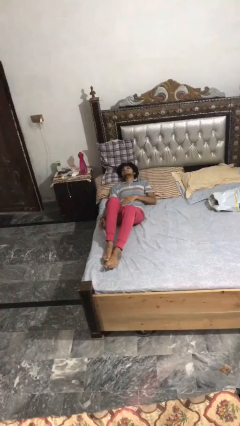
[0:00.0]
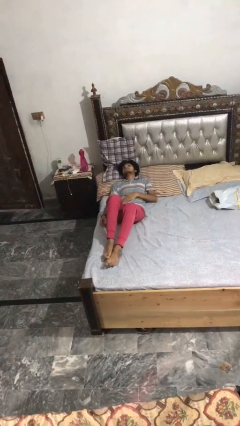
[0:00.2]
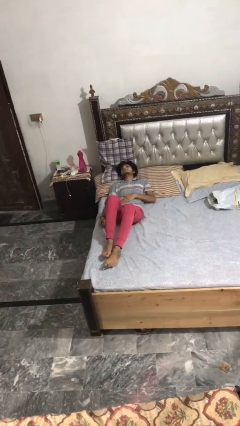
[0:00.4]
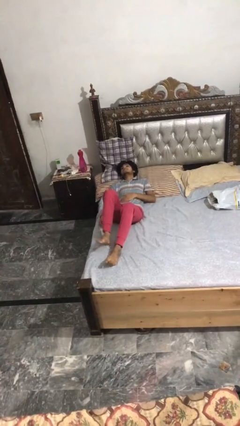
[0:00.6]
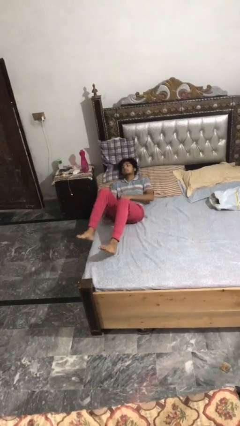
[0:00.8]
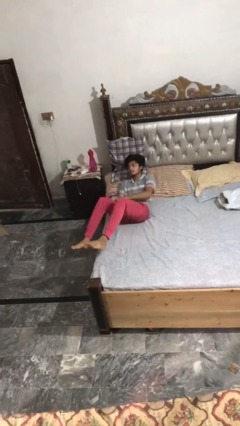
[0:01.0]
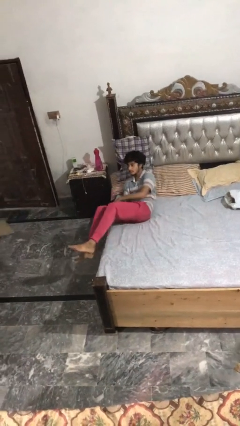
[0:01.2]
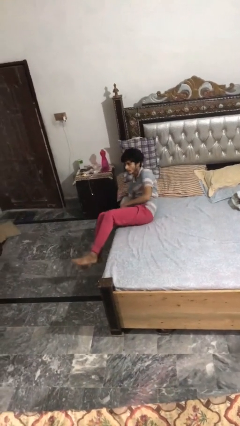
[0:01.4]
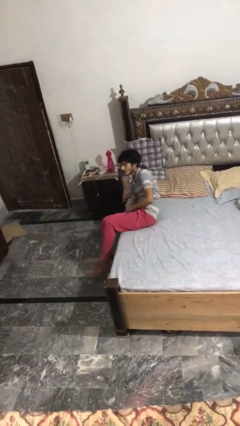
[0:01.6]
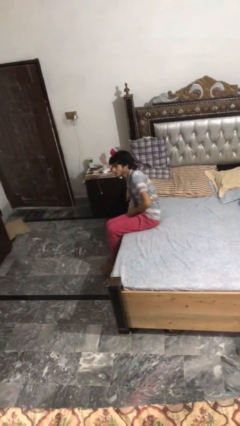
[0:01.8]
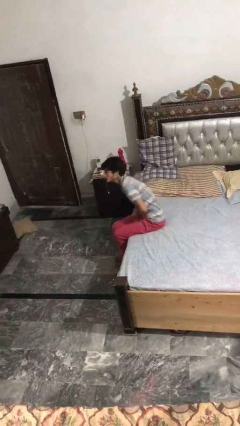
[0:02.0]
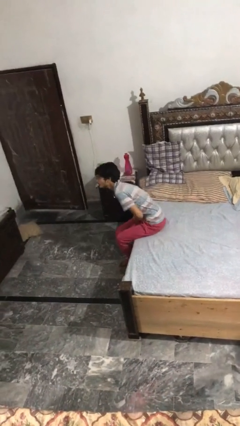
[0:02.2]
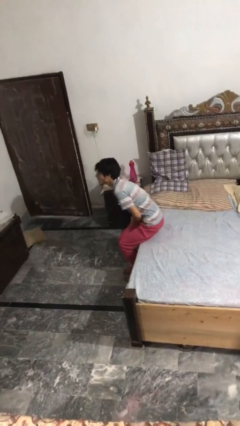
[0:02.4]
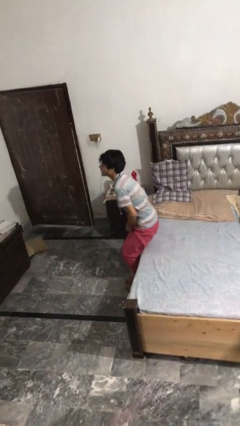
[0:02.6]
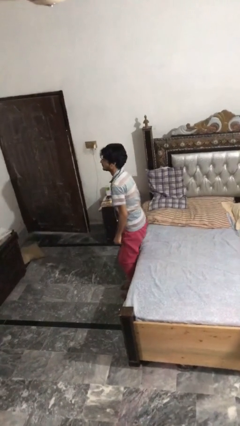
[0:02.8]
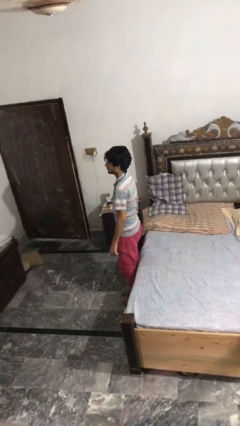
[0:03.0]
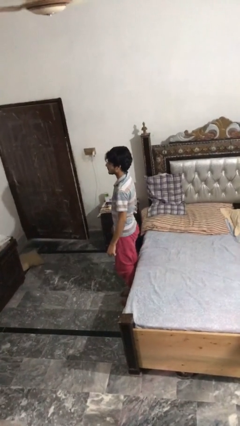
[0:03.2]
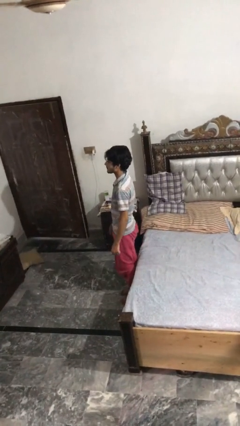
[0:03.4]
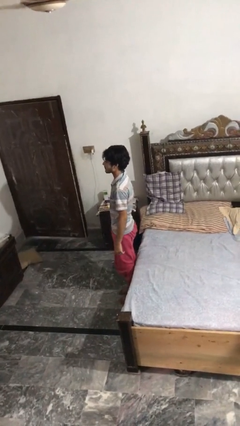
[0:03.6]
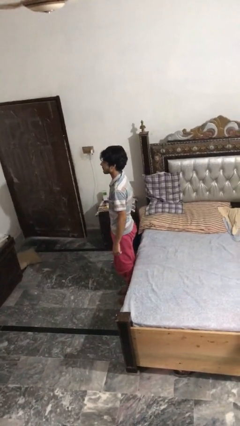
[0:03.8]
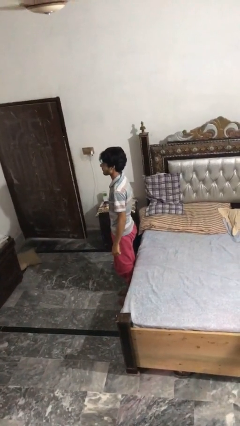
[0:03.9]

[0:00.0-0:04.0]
person stands up

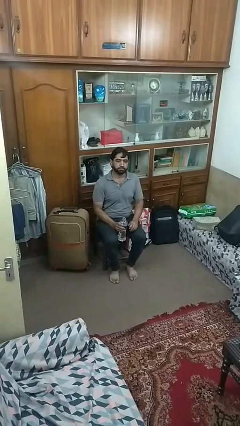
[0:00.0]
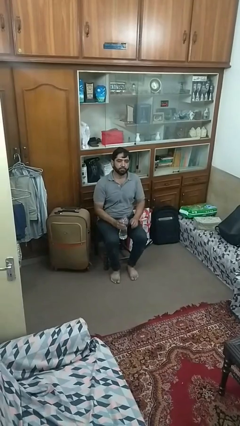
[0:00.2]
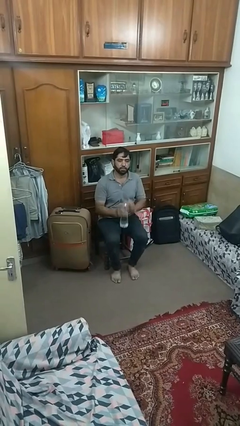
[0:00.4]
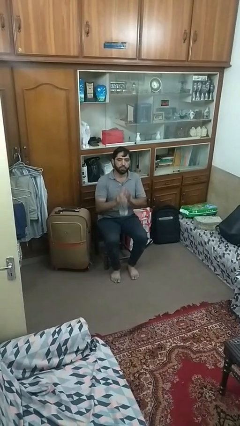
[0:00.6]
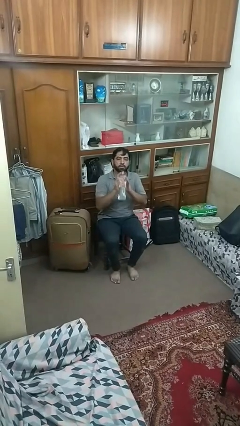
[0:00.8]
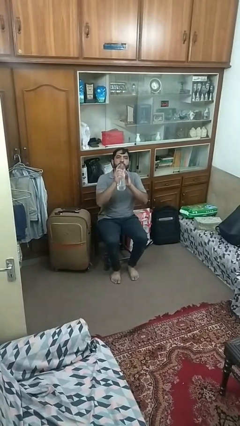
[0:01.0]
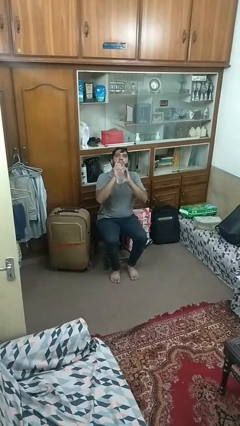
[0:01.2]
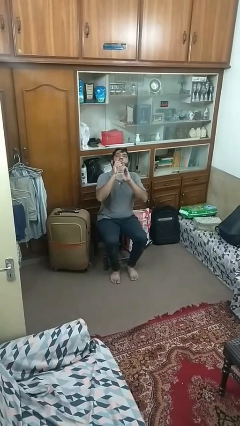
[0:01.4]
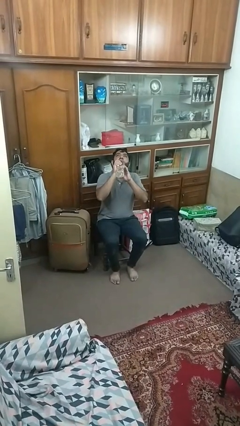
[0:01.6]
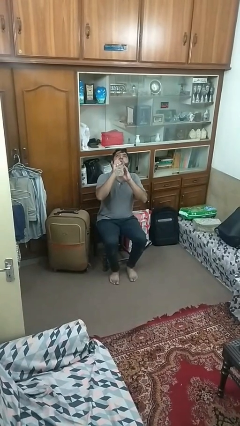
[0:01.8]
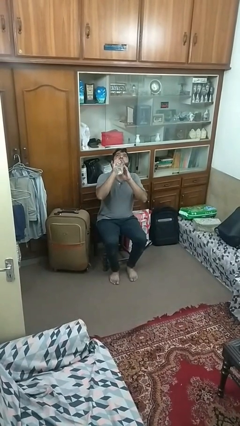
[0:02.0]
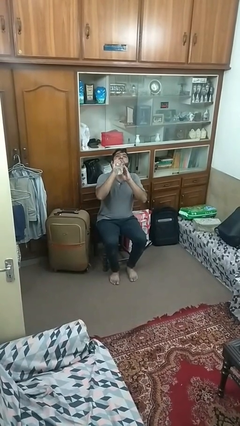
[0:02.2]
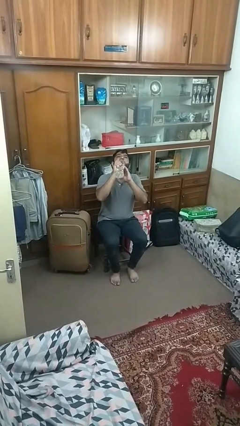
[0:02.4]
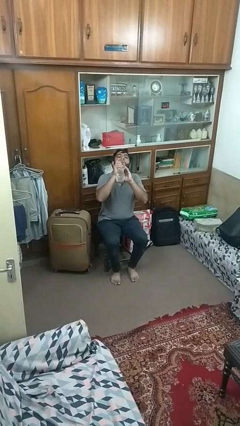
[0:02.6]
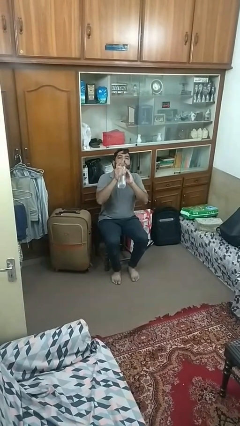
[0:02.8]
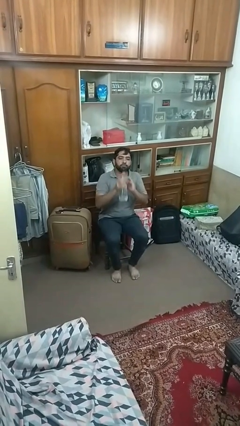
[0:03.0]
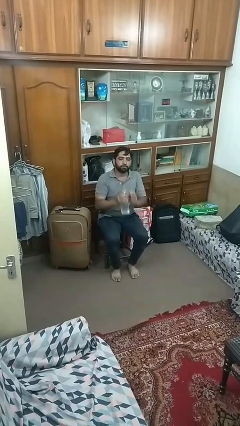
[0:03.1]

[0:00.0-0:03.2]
person drinks from bottle

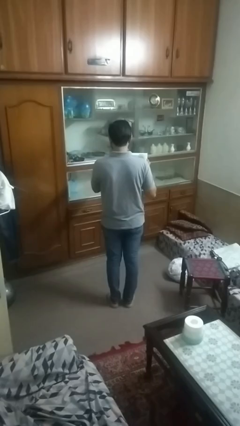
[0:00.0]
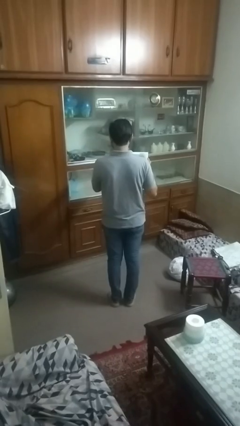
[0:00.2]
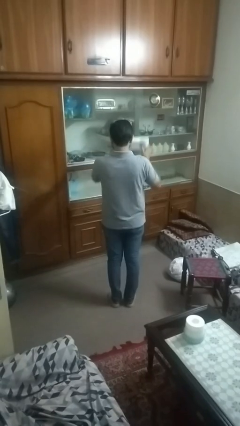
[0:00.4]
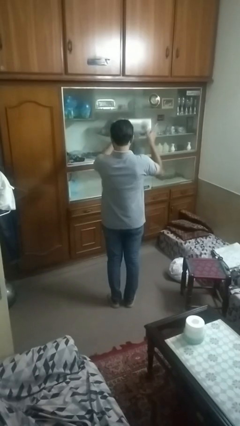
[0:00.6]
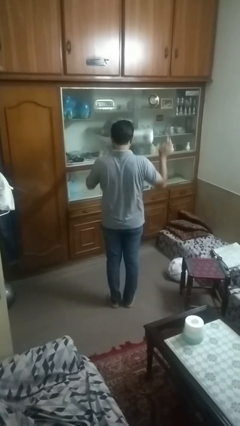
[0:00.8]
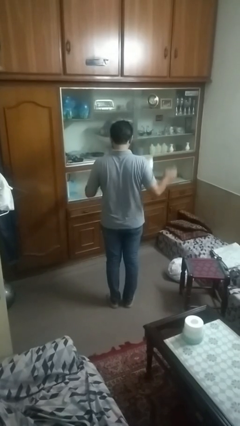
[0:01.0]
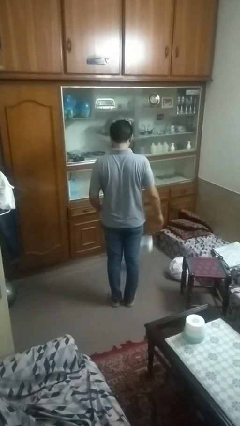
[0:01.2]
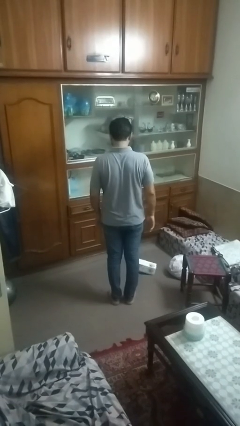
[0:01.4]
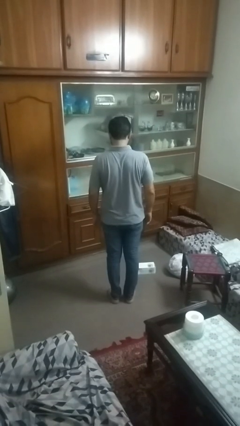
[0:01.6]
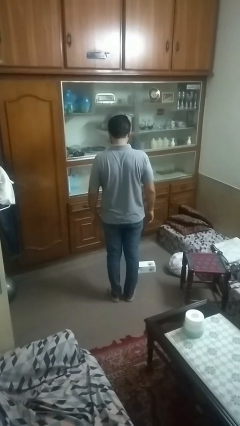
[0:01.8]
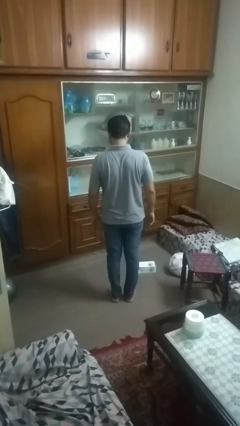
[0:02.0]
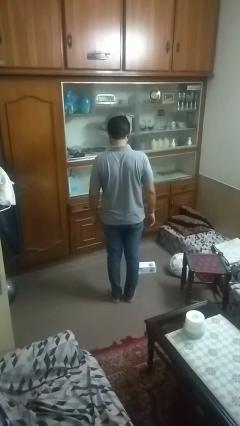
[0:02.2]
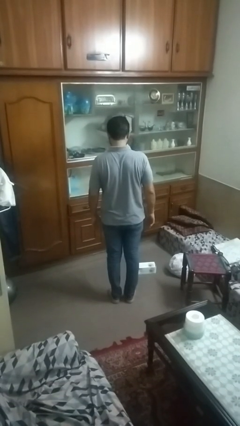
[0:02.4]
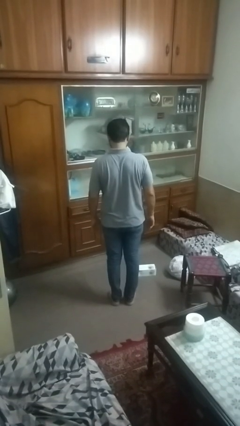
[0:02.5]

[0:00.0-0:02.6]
person throws object into air

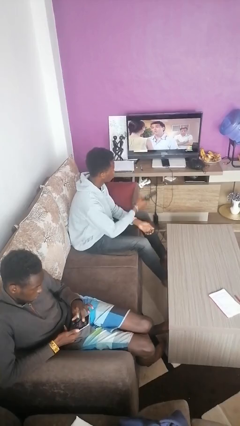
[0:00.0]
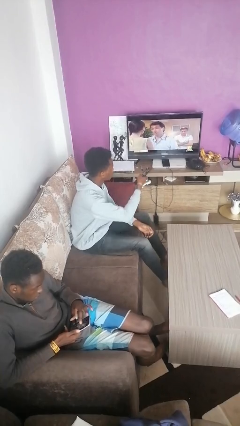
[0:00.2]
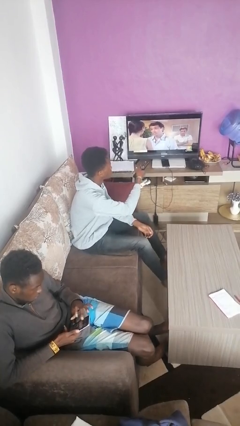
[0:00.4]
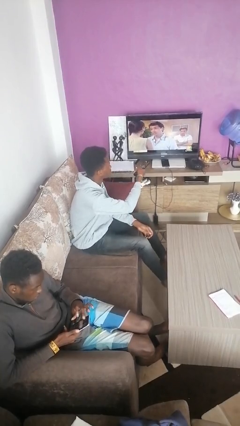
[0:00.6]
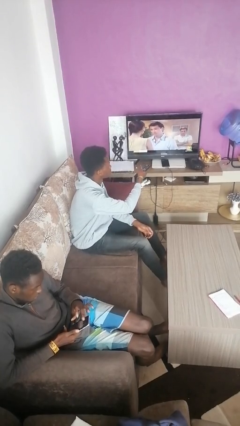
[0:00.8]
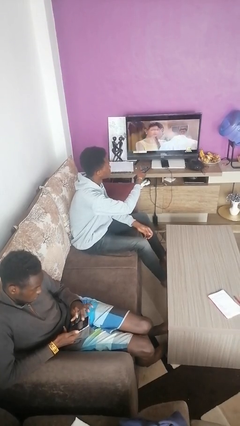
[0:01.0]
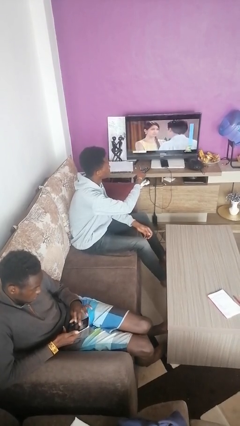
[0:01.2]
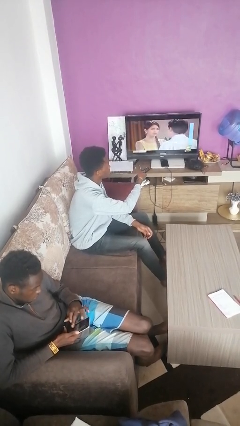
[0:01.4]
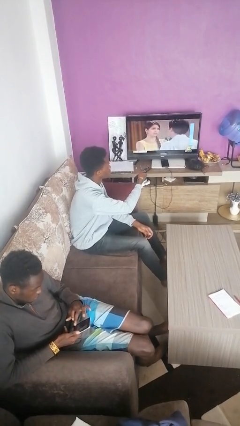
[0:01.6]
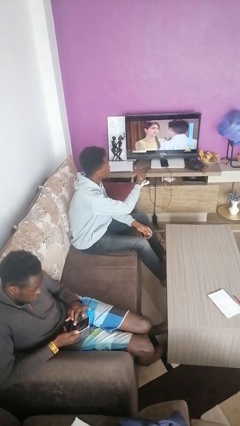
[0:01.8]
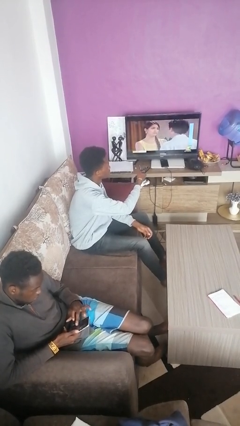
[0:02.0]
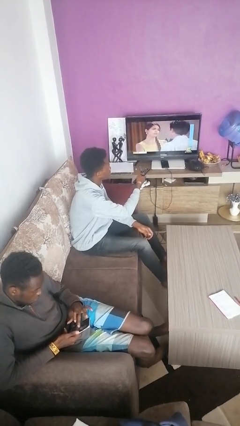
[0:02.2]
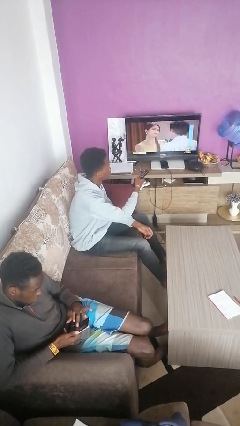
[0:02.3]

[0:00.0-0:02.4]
person uses television remote

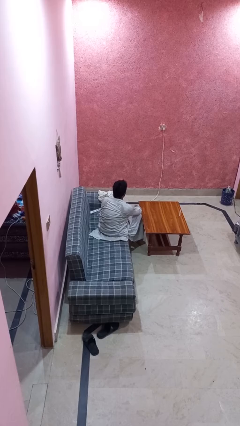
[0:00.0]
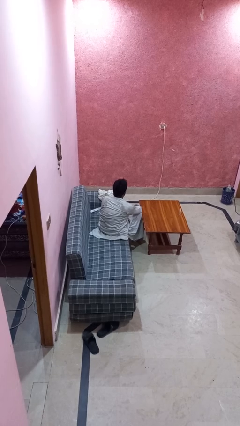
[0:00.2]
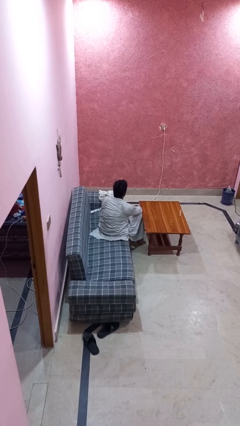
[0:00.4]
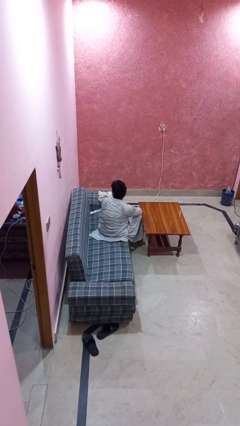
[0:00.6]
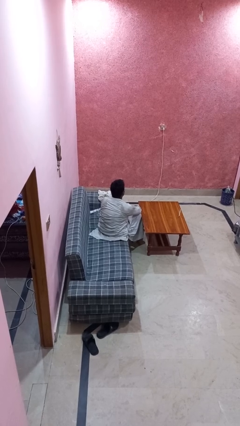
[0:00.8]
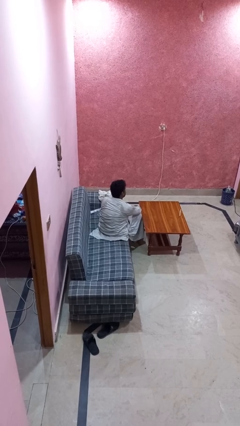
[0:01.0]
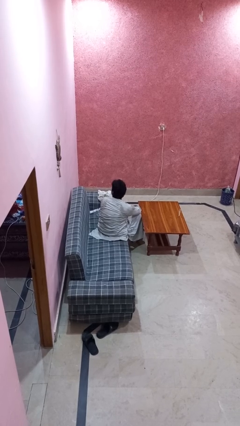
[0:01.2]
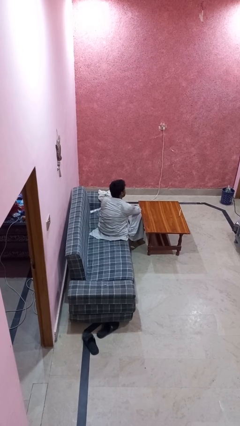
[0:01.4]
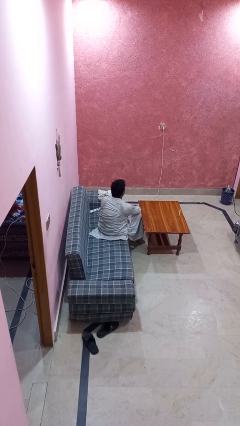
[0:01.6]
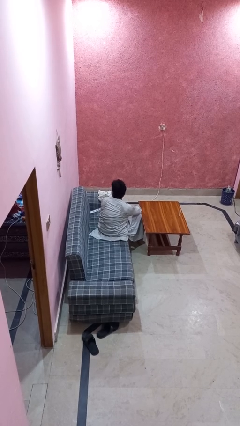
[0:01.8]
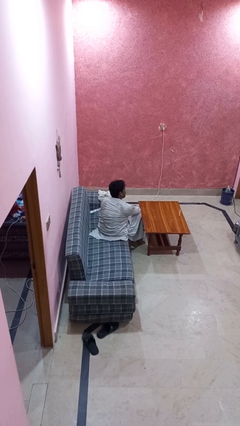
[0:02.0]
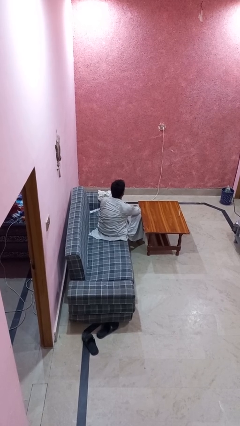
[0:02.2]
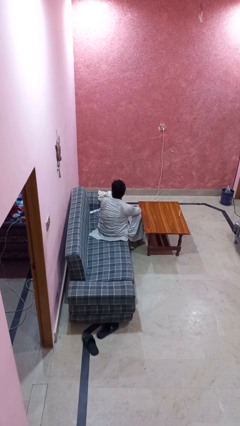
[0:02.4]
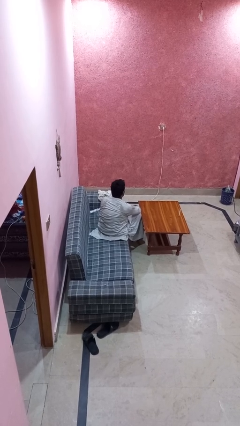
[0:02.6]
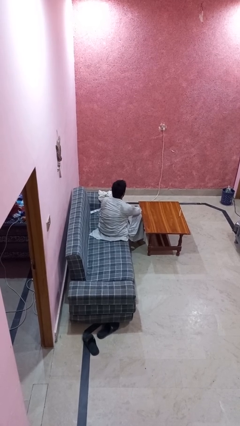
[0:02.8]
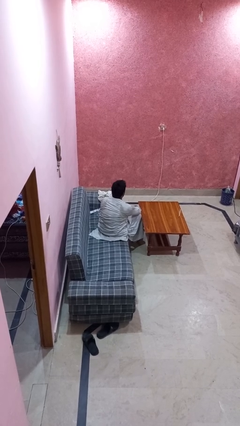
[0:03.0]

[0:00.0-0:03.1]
person shakes head

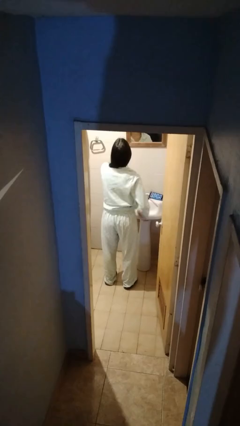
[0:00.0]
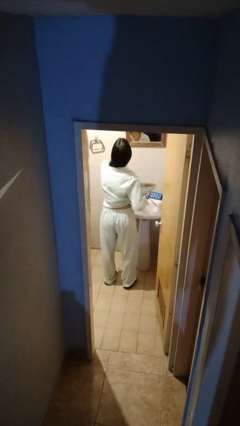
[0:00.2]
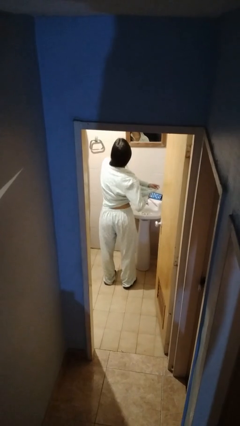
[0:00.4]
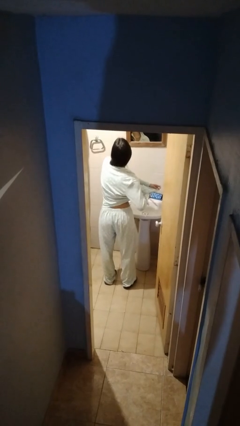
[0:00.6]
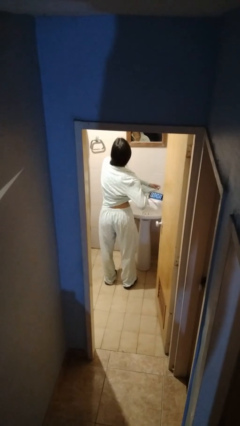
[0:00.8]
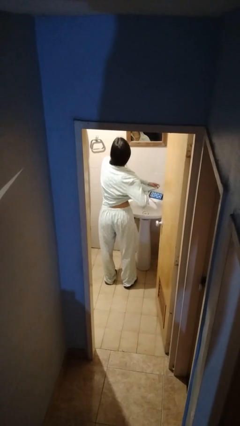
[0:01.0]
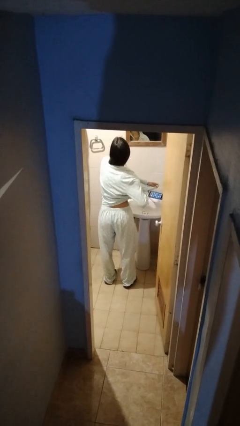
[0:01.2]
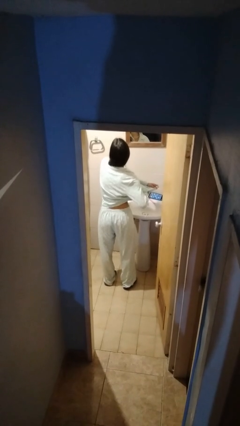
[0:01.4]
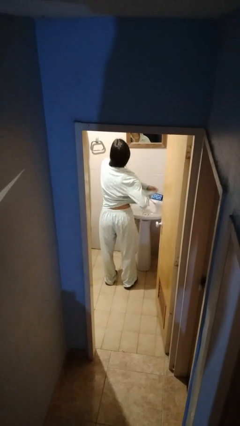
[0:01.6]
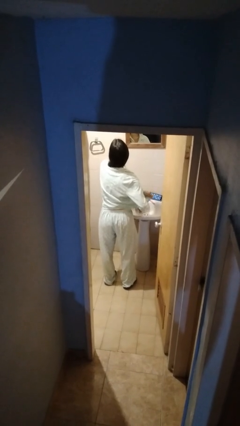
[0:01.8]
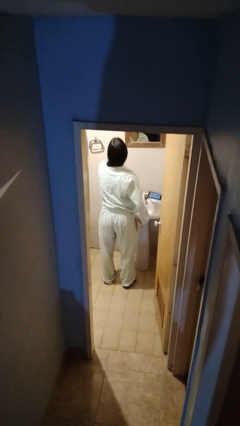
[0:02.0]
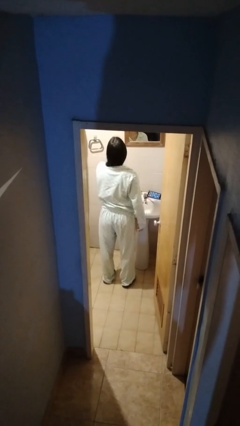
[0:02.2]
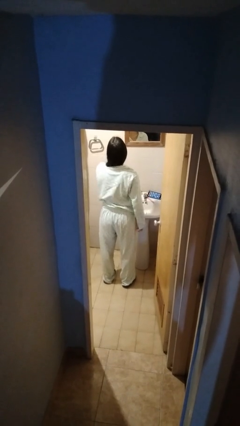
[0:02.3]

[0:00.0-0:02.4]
person applies deodorant
